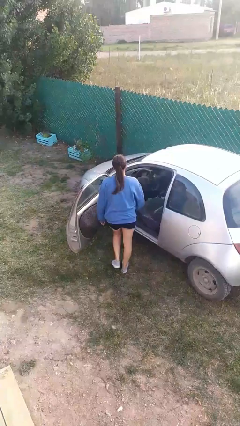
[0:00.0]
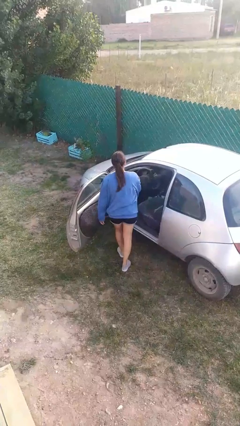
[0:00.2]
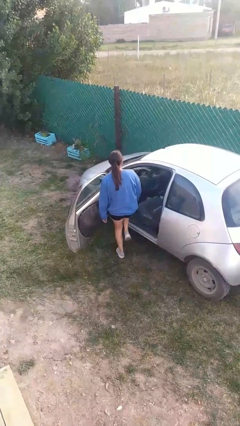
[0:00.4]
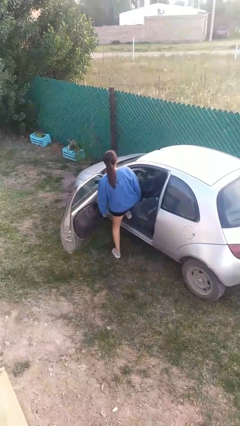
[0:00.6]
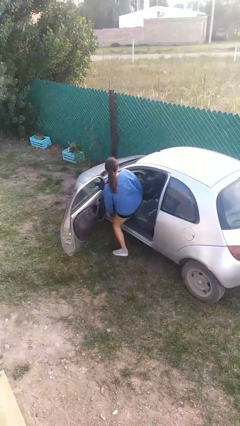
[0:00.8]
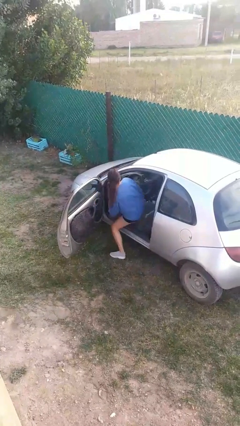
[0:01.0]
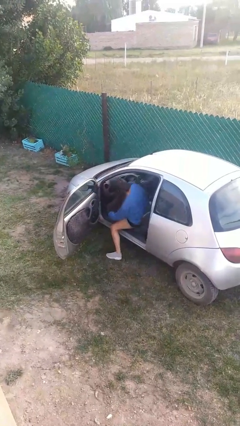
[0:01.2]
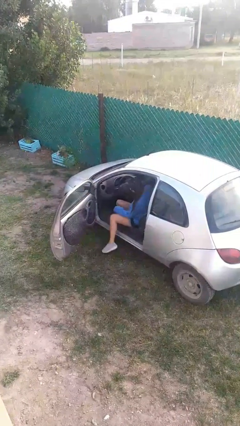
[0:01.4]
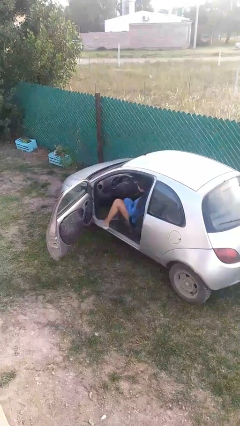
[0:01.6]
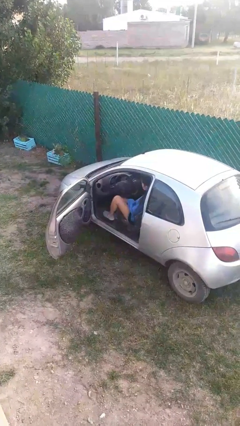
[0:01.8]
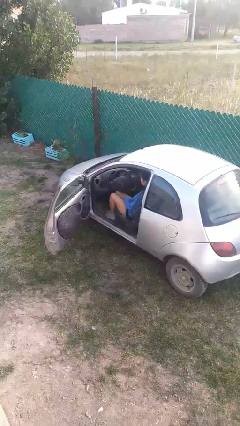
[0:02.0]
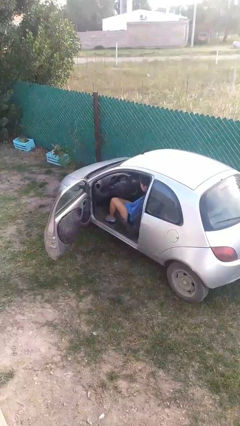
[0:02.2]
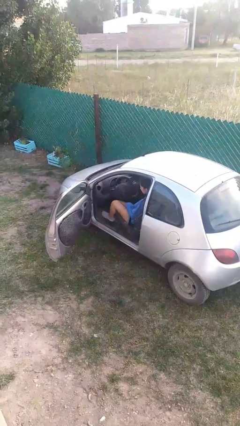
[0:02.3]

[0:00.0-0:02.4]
person enters car

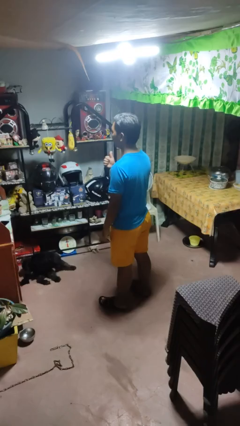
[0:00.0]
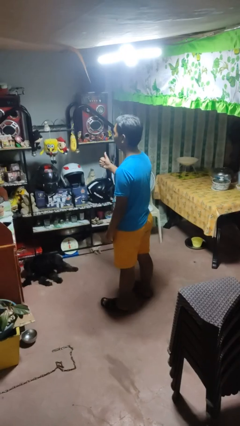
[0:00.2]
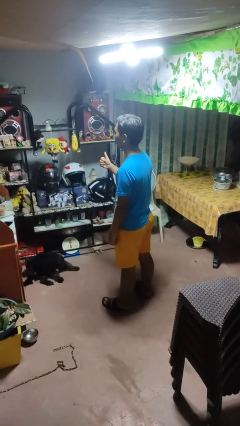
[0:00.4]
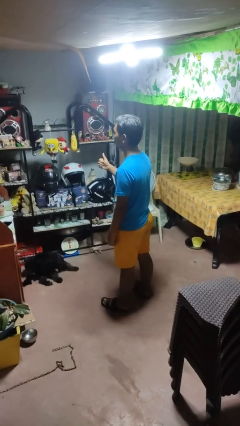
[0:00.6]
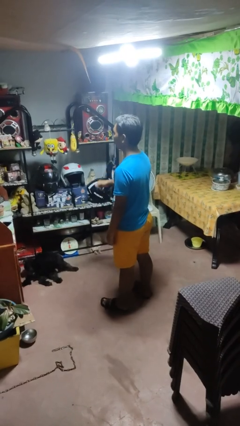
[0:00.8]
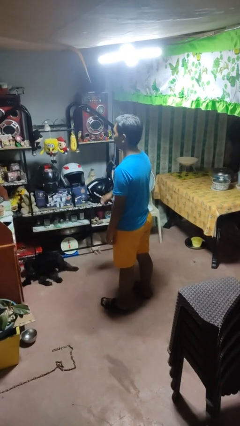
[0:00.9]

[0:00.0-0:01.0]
person gestures thumbs up

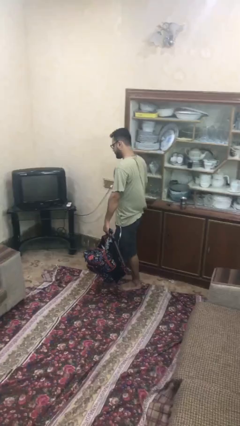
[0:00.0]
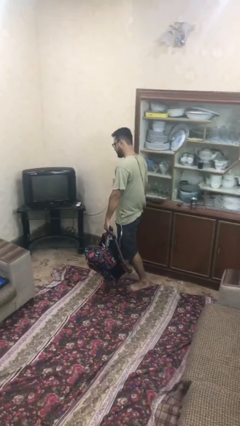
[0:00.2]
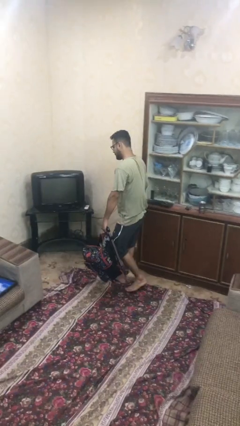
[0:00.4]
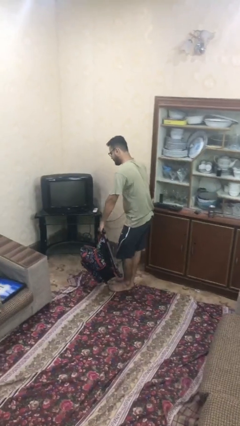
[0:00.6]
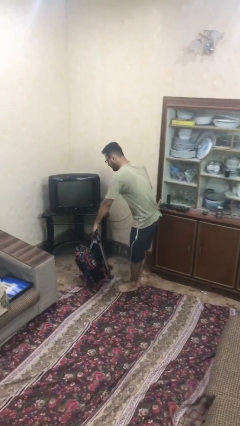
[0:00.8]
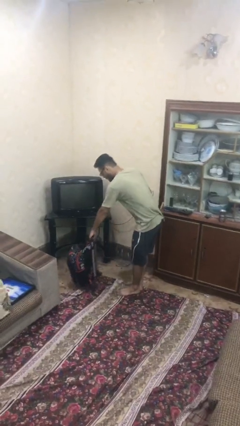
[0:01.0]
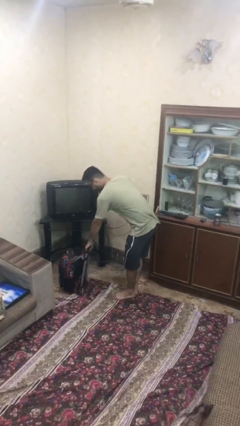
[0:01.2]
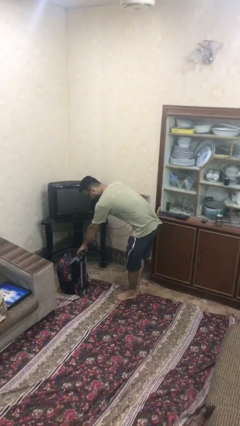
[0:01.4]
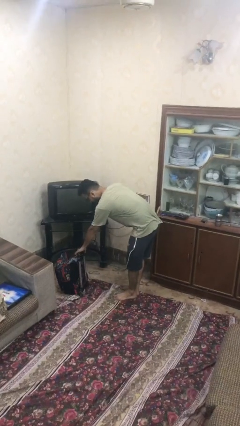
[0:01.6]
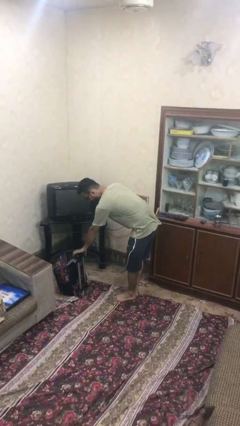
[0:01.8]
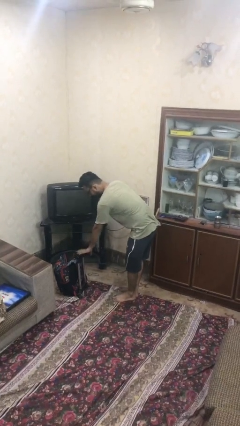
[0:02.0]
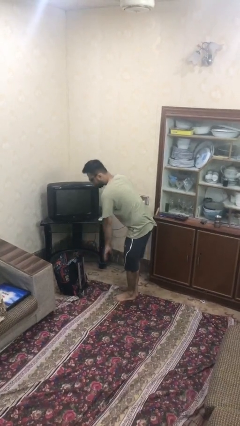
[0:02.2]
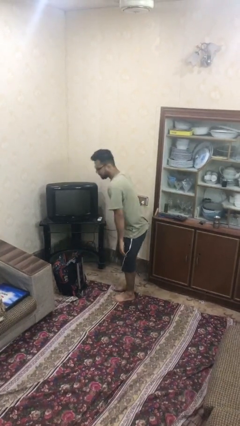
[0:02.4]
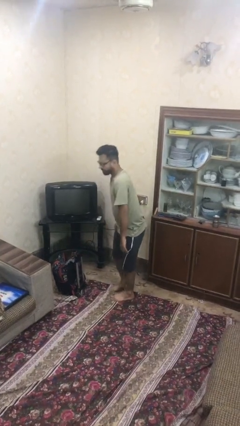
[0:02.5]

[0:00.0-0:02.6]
person puts down object on floor

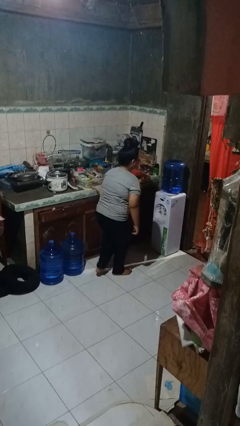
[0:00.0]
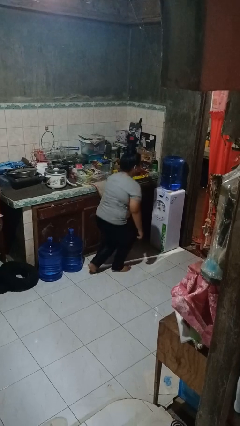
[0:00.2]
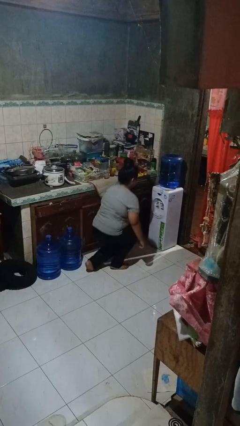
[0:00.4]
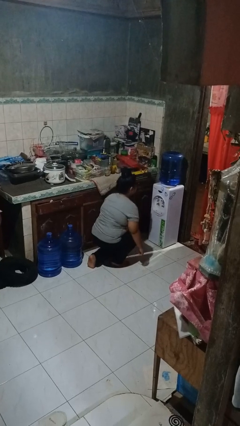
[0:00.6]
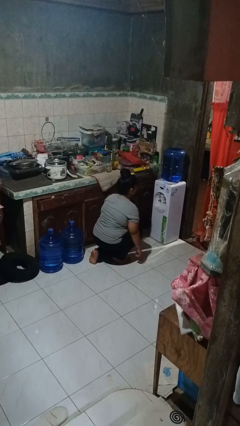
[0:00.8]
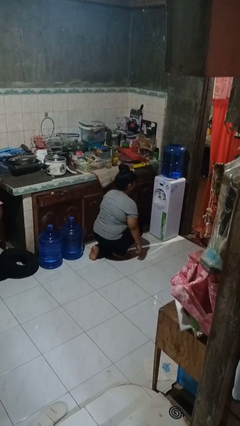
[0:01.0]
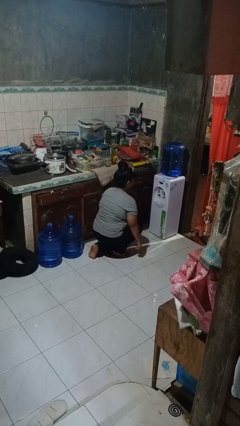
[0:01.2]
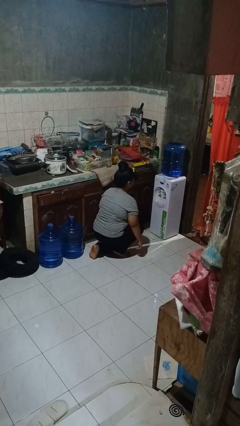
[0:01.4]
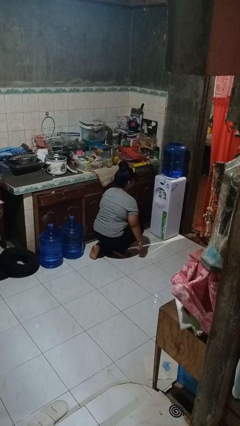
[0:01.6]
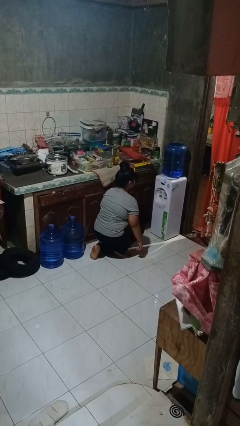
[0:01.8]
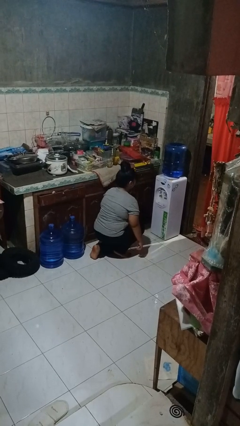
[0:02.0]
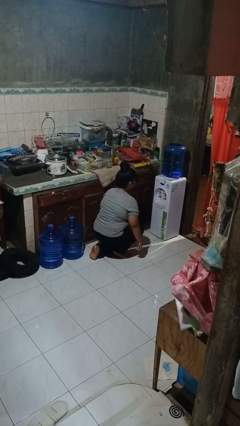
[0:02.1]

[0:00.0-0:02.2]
person kneels

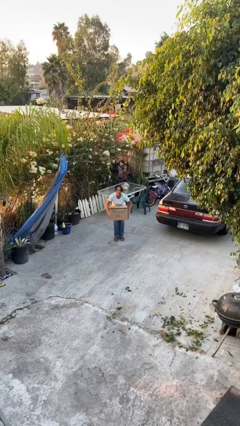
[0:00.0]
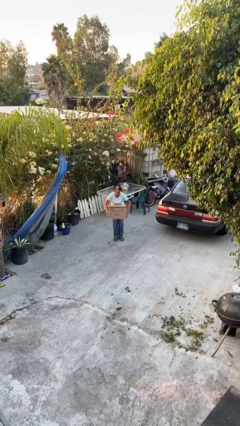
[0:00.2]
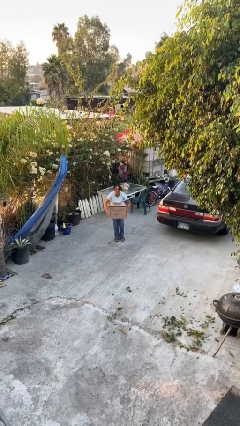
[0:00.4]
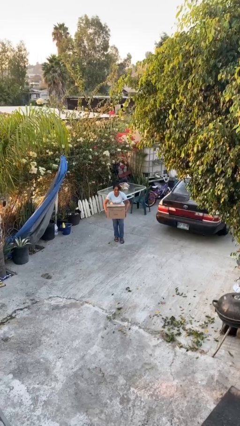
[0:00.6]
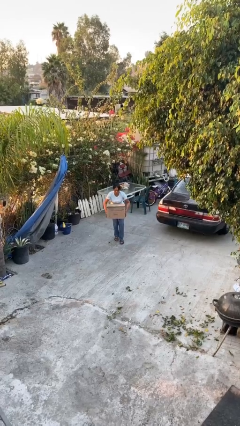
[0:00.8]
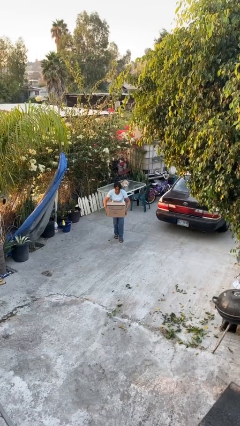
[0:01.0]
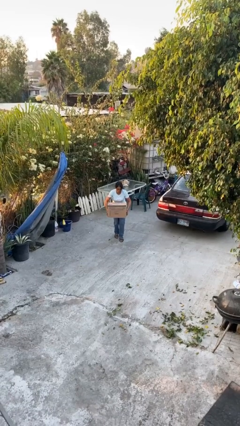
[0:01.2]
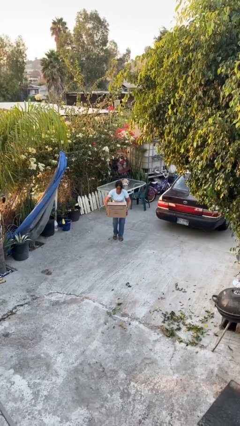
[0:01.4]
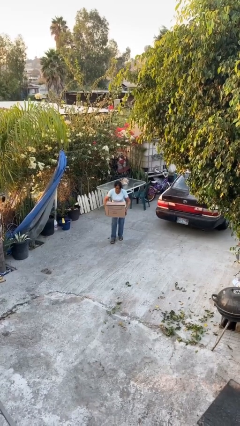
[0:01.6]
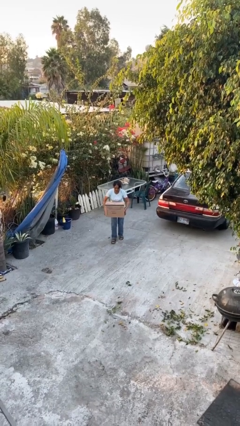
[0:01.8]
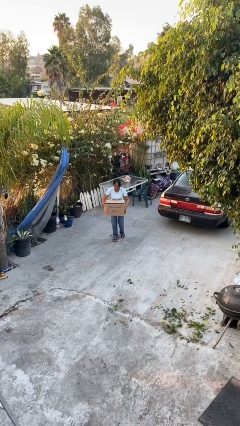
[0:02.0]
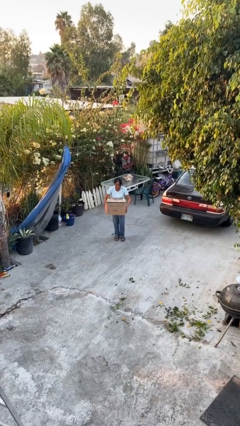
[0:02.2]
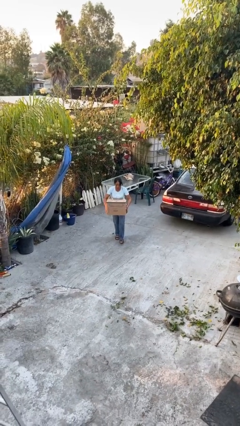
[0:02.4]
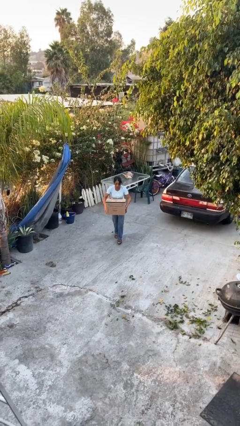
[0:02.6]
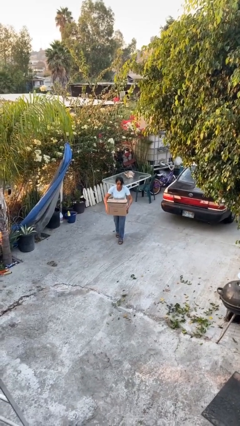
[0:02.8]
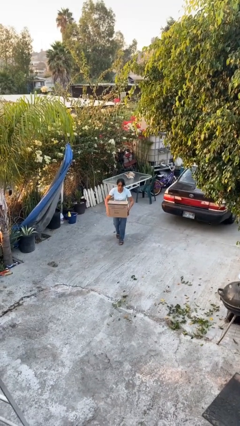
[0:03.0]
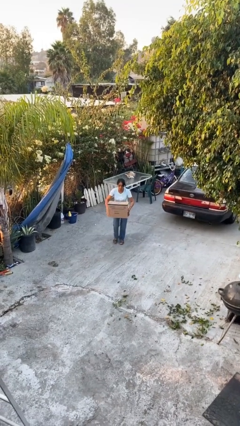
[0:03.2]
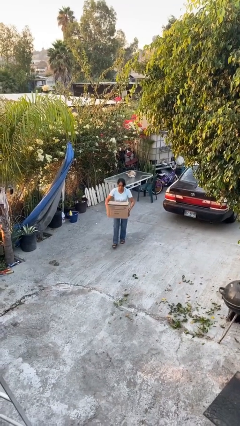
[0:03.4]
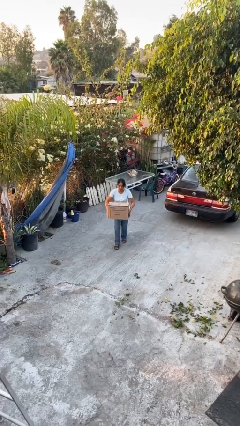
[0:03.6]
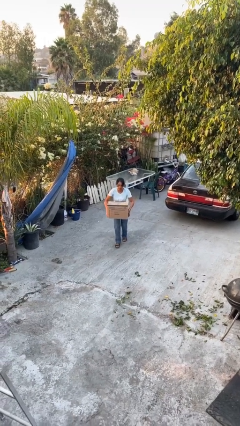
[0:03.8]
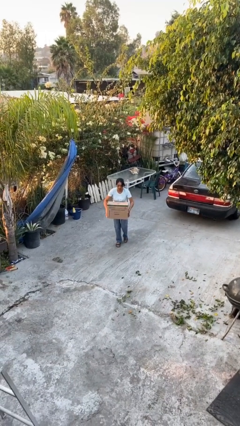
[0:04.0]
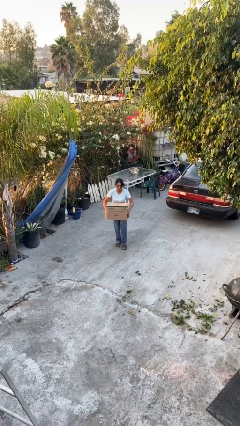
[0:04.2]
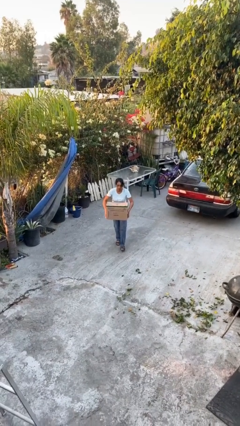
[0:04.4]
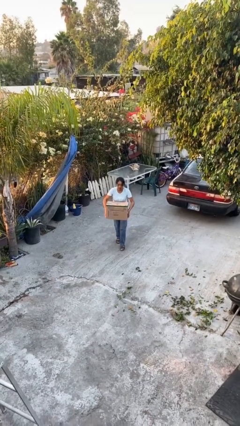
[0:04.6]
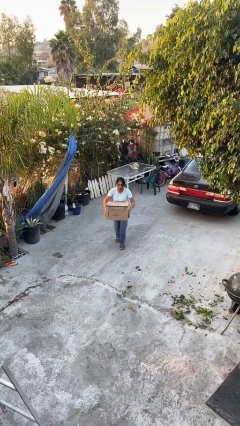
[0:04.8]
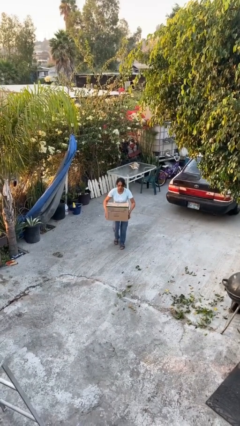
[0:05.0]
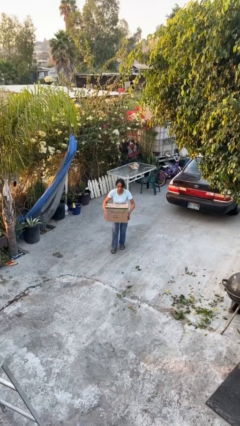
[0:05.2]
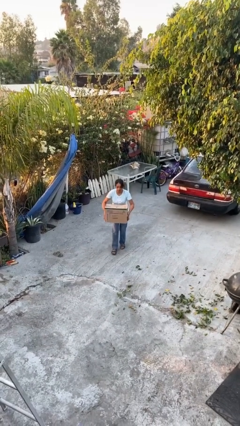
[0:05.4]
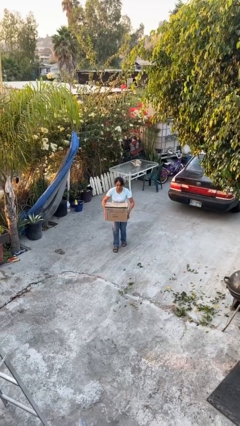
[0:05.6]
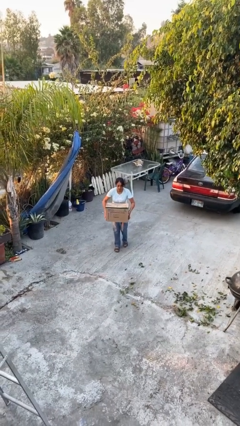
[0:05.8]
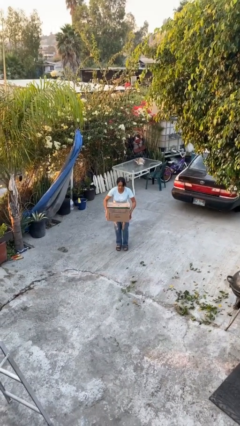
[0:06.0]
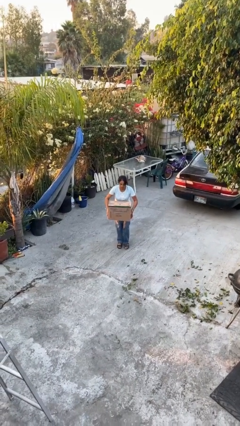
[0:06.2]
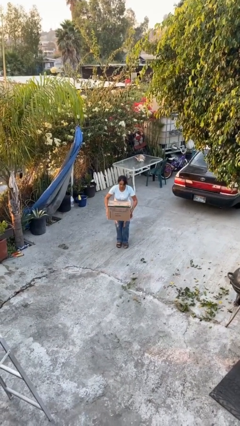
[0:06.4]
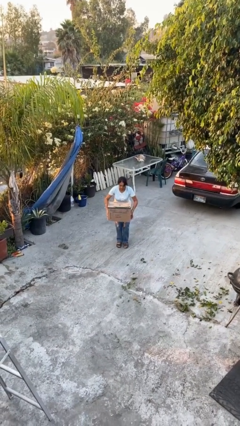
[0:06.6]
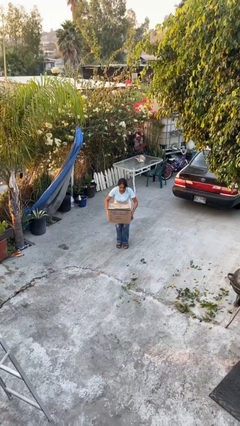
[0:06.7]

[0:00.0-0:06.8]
person carries heavy object

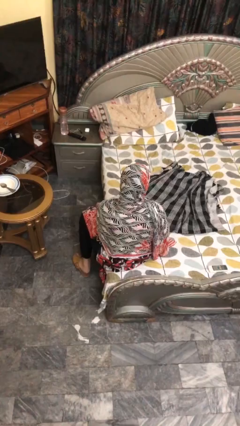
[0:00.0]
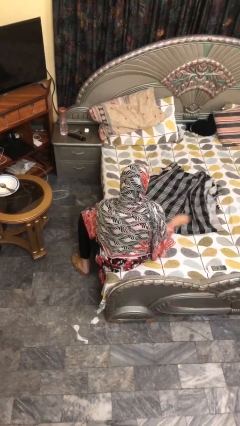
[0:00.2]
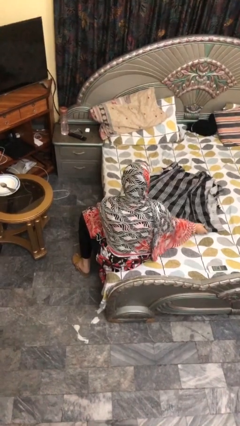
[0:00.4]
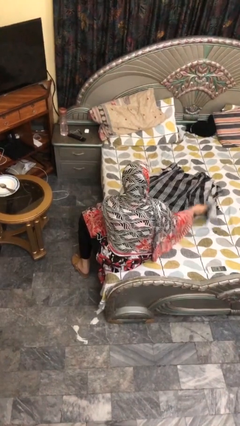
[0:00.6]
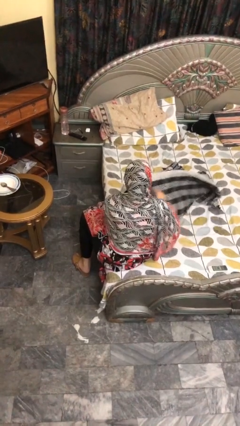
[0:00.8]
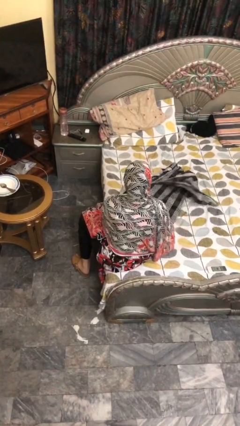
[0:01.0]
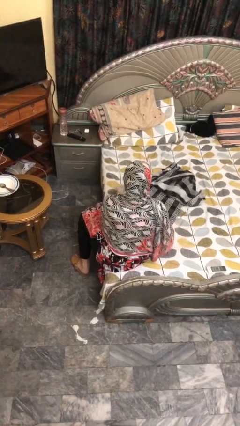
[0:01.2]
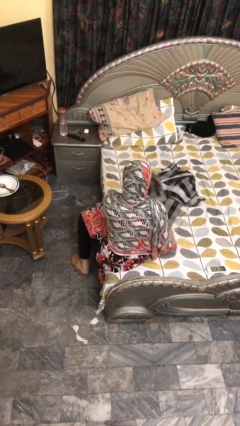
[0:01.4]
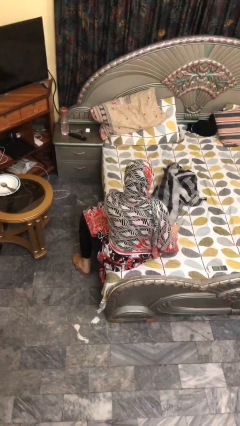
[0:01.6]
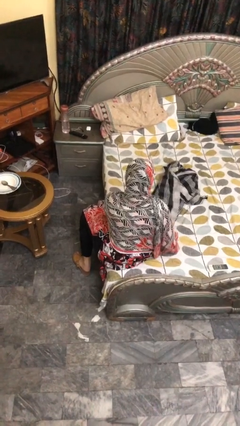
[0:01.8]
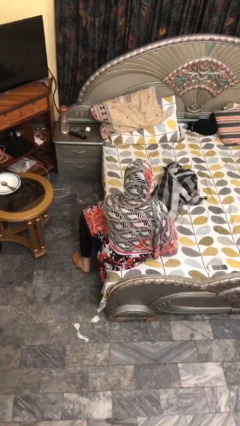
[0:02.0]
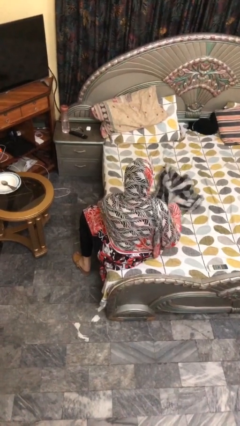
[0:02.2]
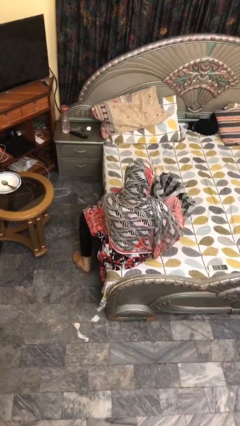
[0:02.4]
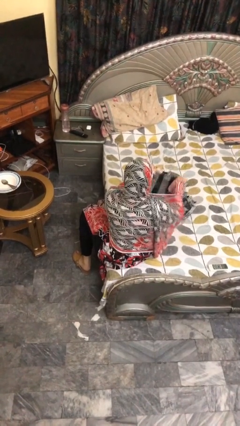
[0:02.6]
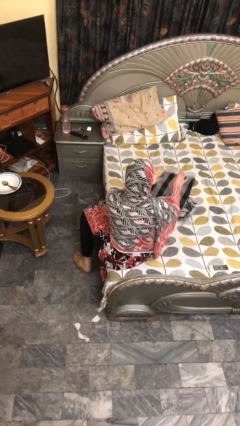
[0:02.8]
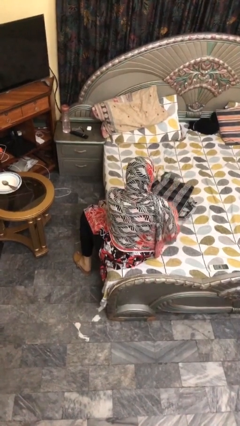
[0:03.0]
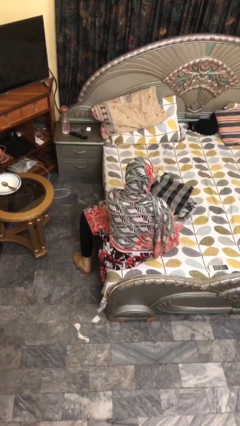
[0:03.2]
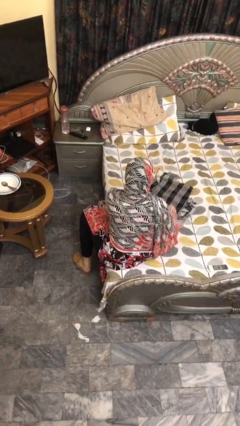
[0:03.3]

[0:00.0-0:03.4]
person folds blanket
